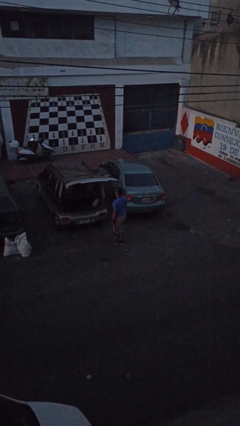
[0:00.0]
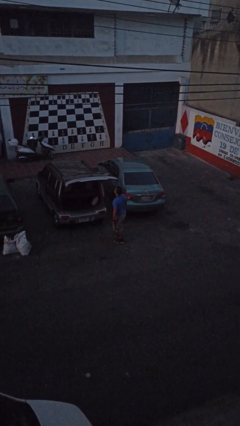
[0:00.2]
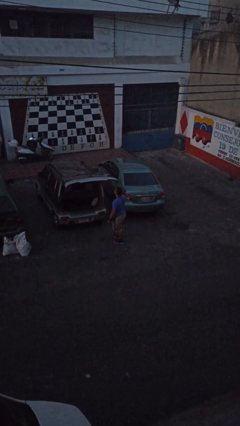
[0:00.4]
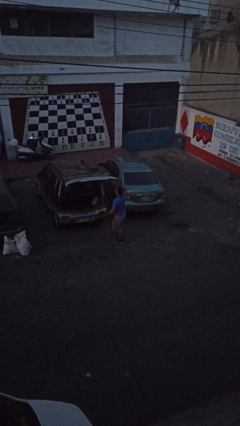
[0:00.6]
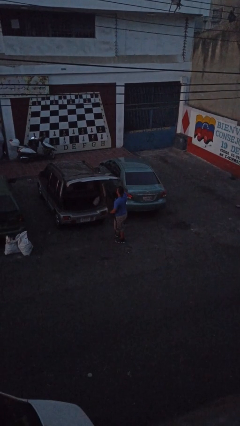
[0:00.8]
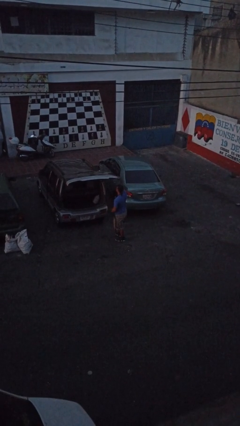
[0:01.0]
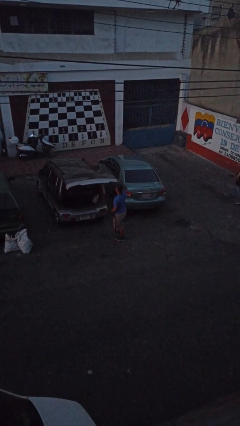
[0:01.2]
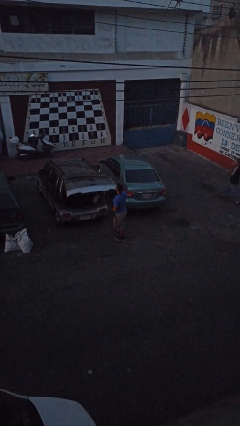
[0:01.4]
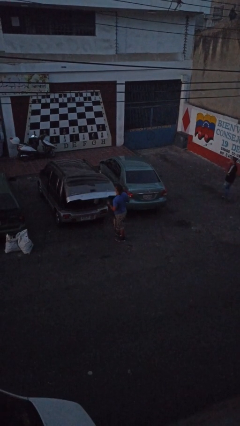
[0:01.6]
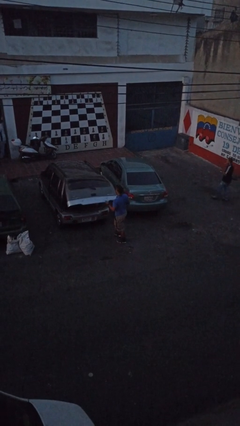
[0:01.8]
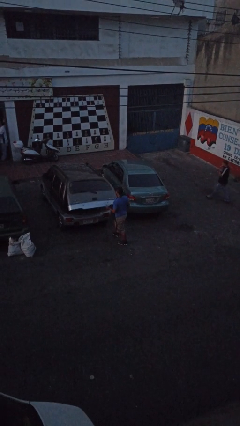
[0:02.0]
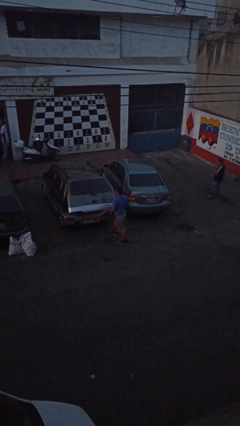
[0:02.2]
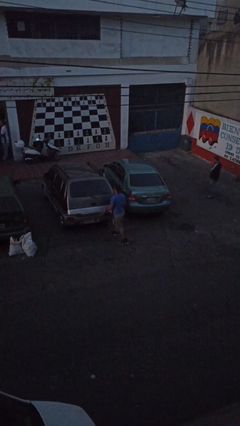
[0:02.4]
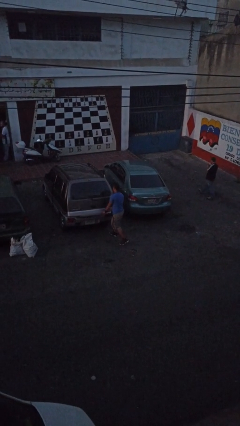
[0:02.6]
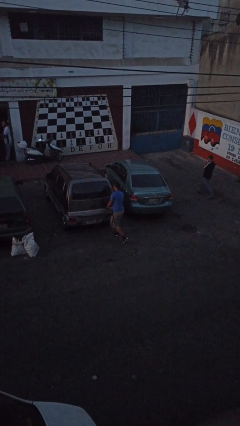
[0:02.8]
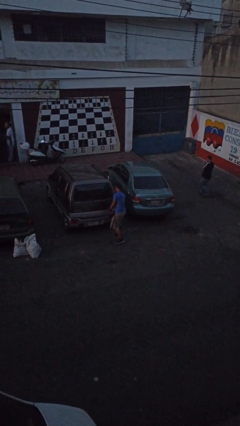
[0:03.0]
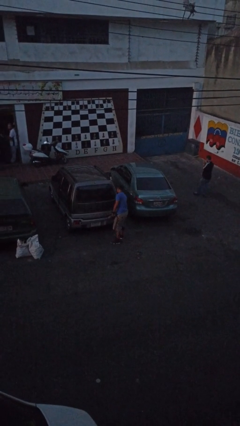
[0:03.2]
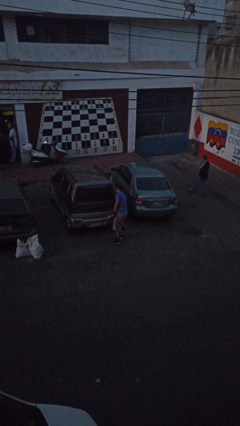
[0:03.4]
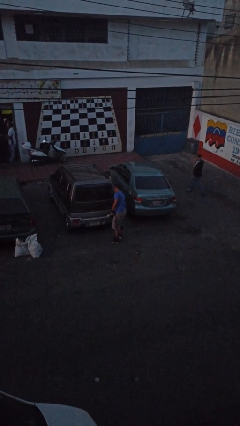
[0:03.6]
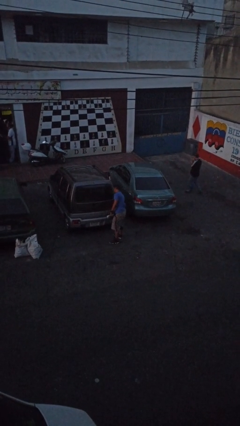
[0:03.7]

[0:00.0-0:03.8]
person closes car trunk

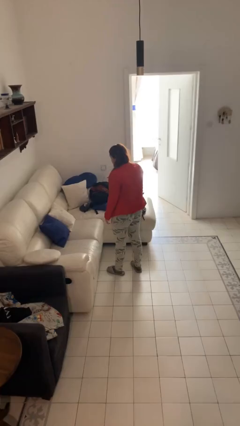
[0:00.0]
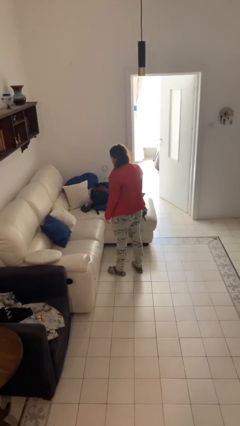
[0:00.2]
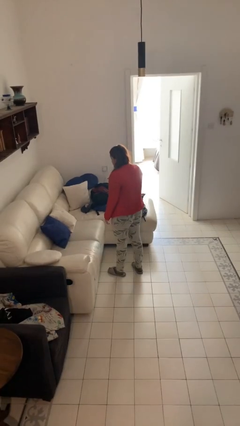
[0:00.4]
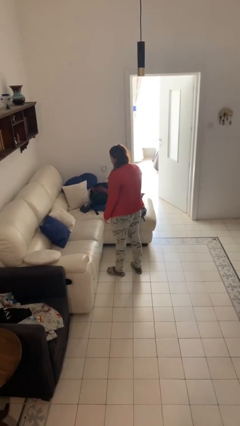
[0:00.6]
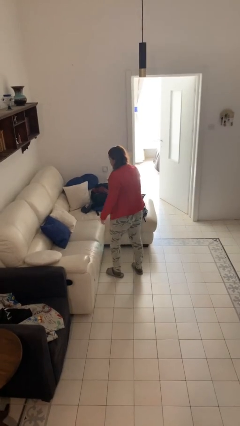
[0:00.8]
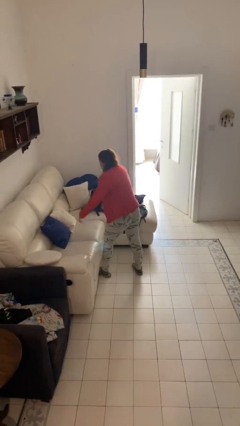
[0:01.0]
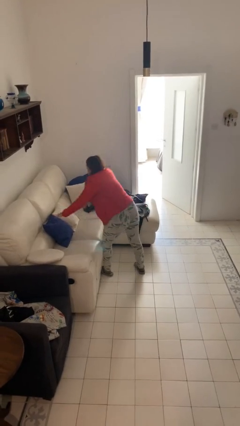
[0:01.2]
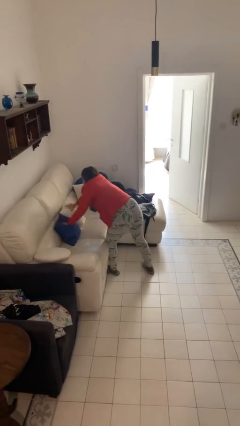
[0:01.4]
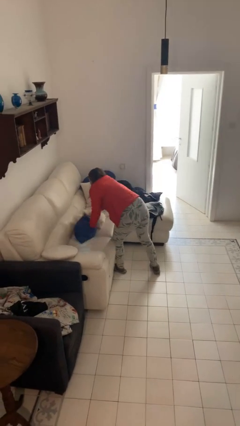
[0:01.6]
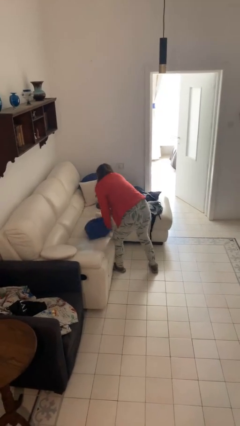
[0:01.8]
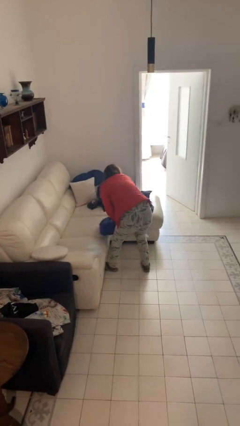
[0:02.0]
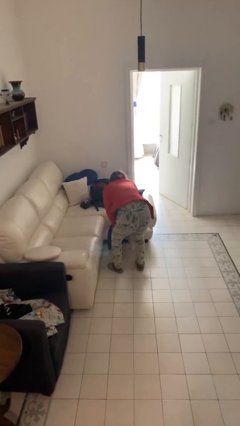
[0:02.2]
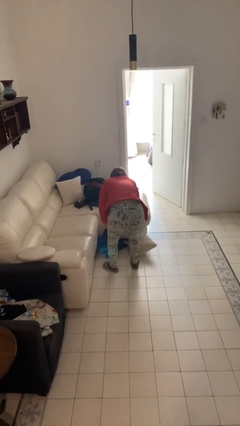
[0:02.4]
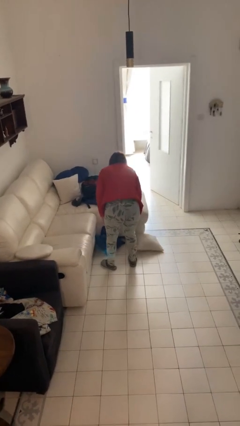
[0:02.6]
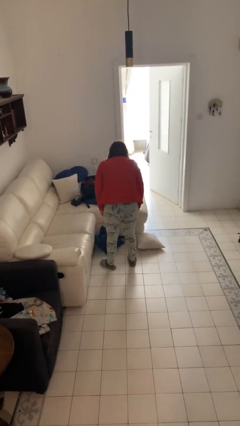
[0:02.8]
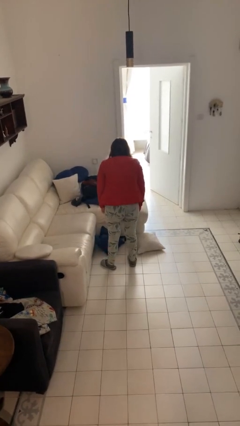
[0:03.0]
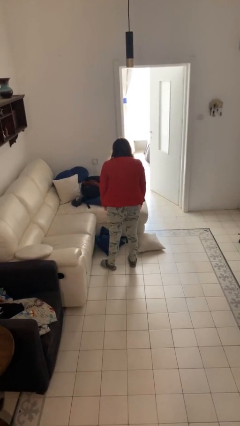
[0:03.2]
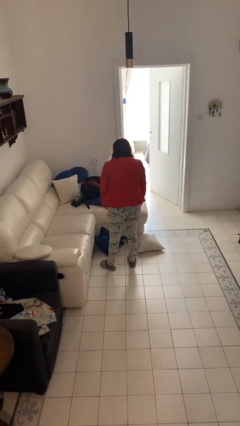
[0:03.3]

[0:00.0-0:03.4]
person knocks over furniture

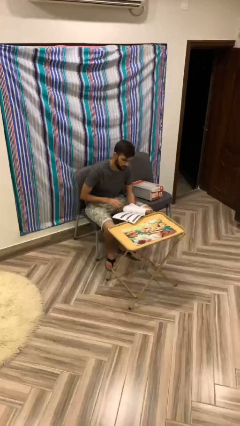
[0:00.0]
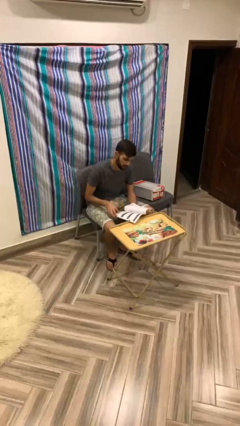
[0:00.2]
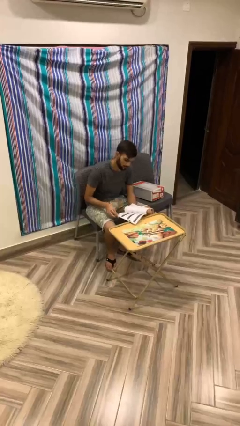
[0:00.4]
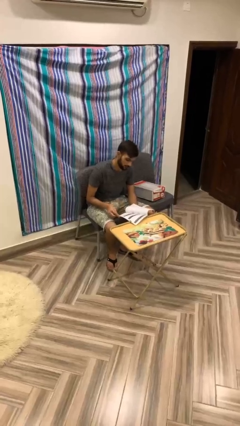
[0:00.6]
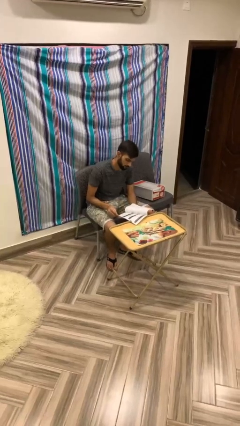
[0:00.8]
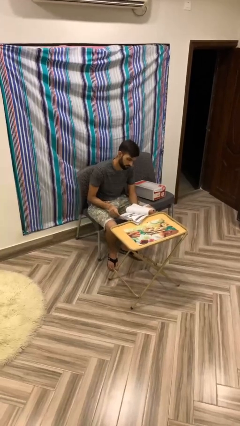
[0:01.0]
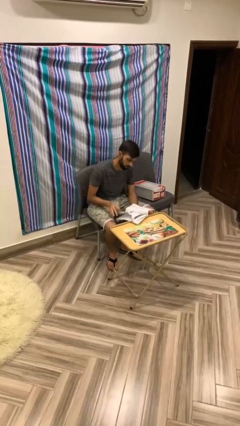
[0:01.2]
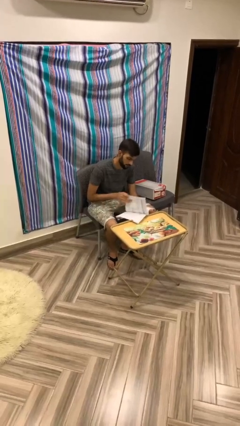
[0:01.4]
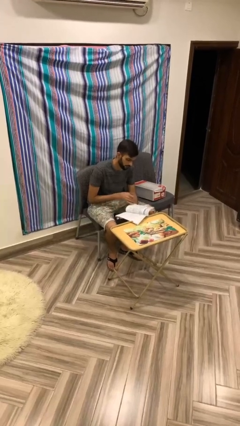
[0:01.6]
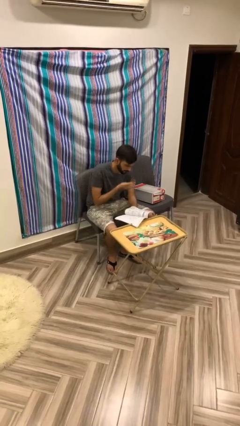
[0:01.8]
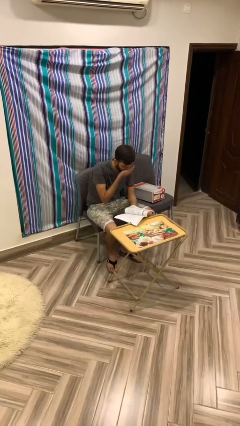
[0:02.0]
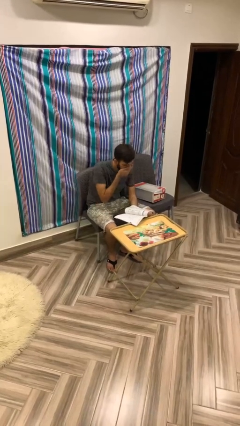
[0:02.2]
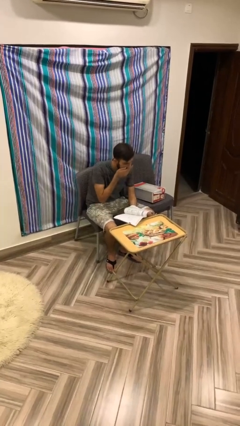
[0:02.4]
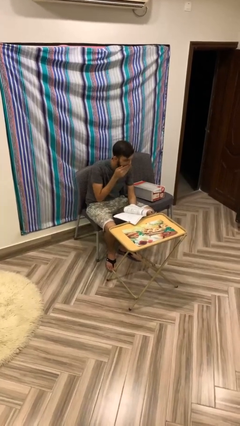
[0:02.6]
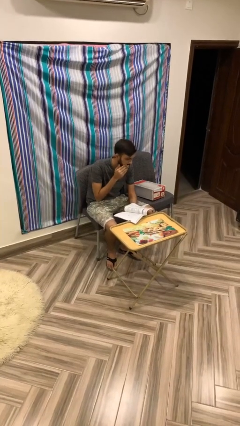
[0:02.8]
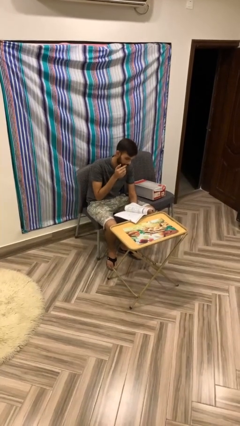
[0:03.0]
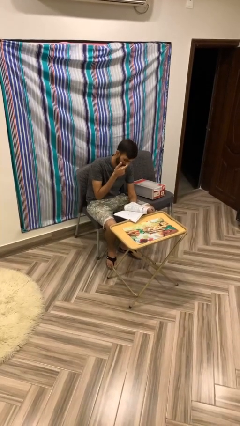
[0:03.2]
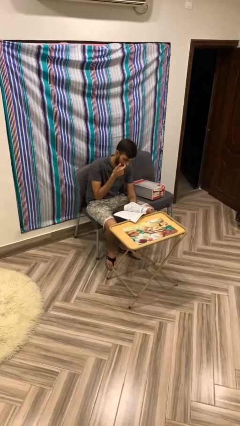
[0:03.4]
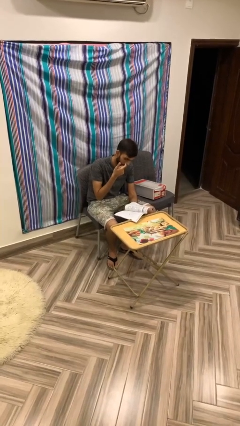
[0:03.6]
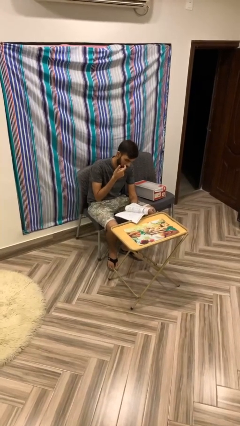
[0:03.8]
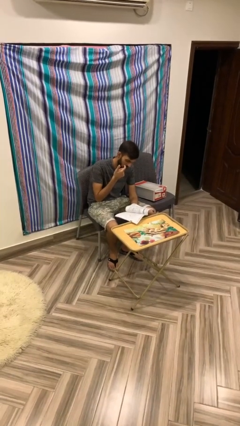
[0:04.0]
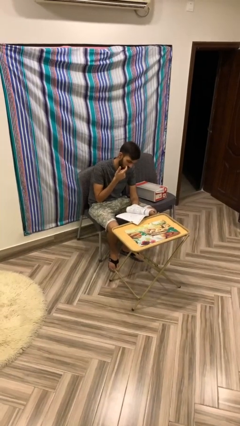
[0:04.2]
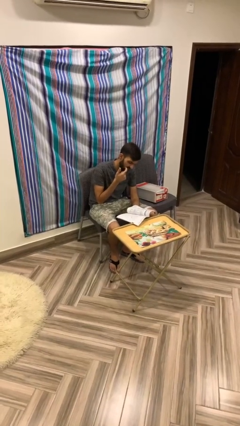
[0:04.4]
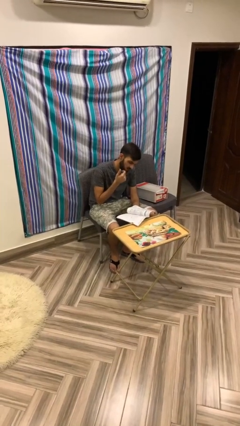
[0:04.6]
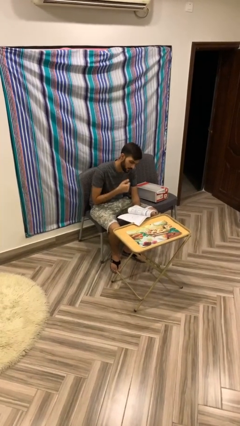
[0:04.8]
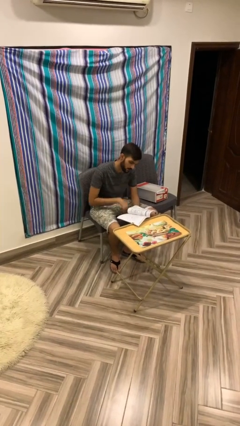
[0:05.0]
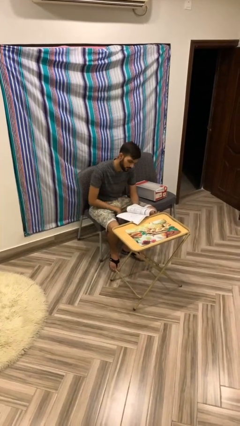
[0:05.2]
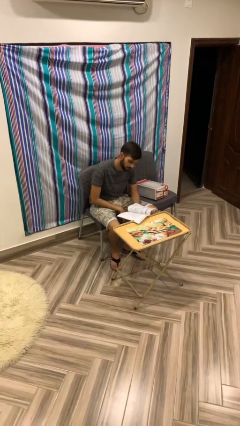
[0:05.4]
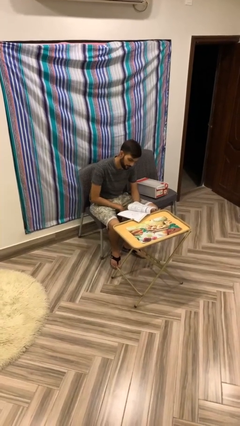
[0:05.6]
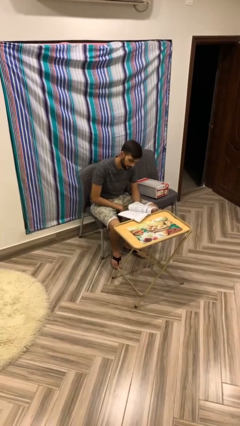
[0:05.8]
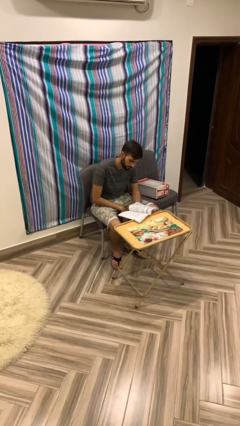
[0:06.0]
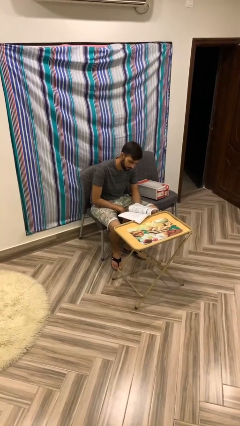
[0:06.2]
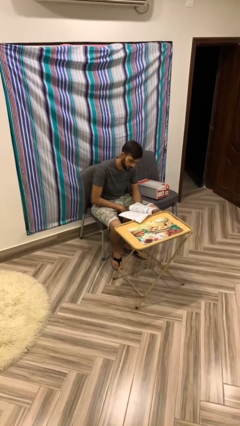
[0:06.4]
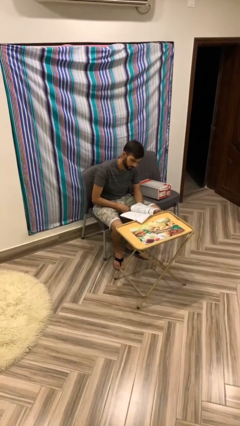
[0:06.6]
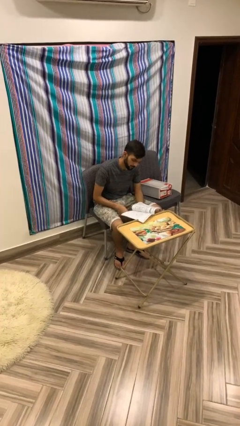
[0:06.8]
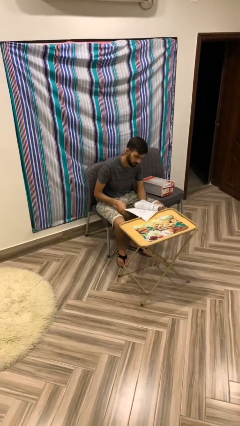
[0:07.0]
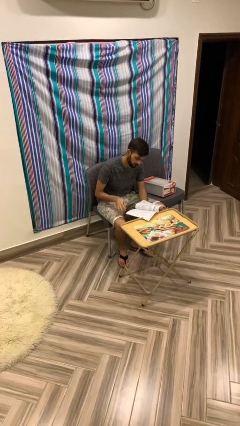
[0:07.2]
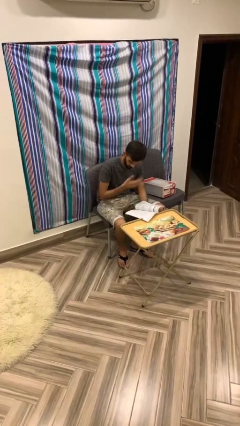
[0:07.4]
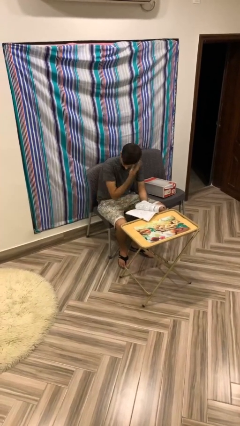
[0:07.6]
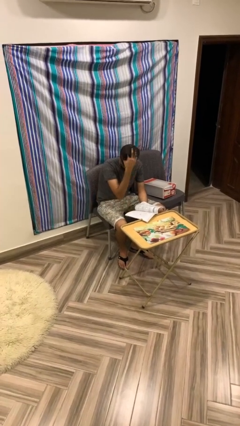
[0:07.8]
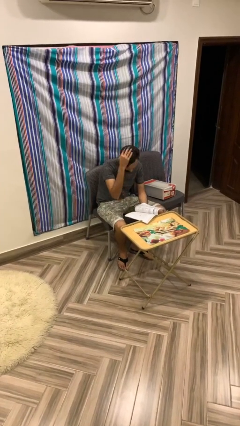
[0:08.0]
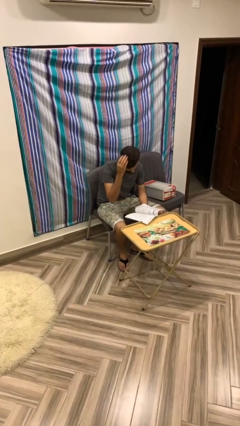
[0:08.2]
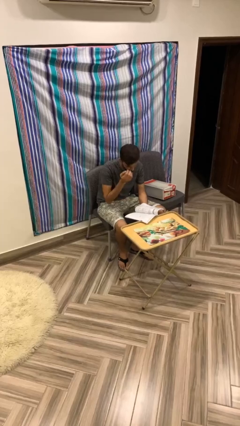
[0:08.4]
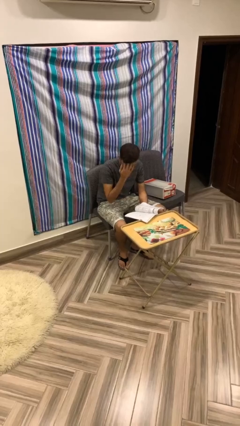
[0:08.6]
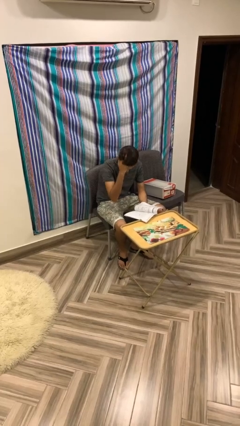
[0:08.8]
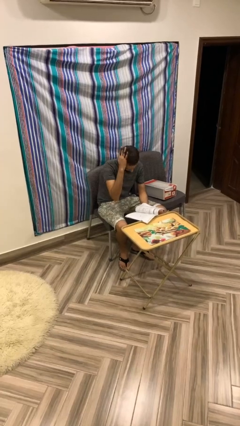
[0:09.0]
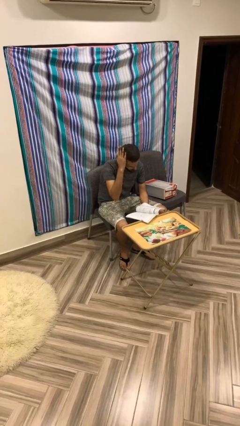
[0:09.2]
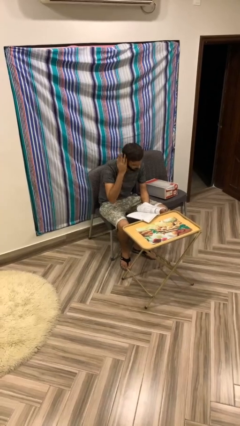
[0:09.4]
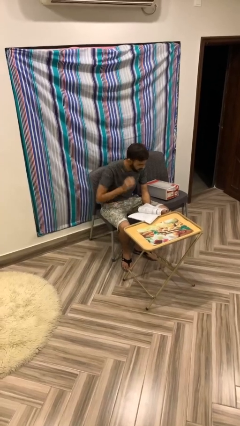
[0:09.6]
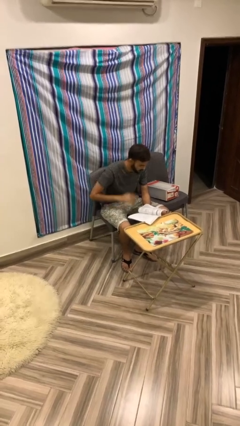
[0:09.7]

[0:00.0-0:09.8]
person reads document

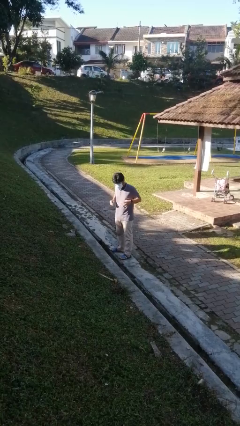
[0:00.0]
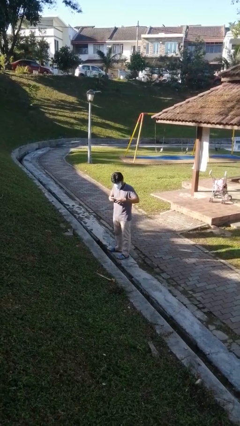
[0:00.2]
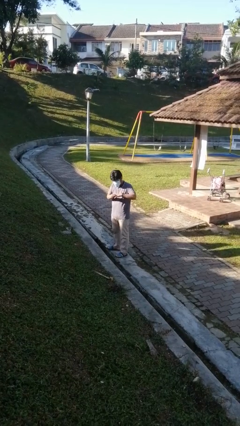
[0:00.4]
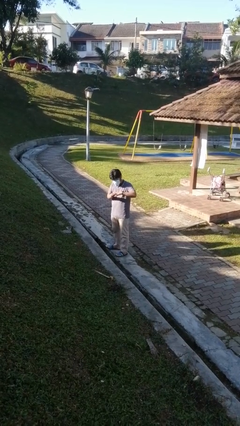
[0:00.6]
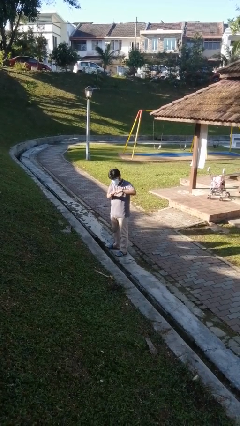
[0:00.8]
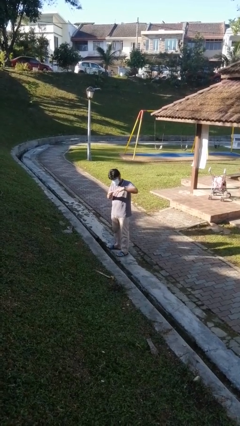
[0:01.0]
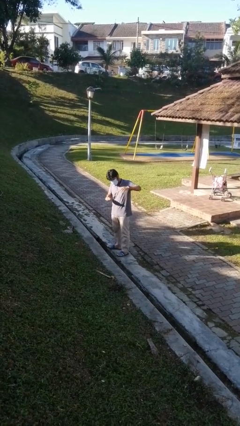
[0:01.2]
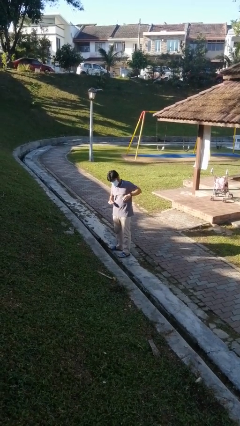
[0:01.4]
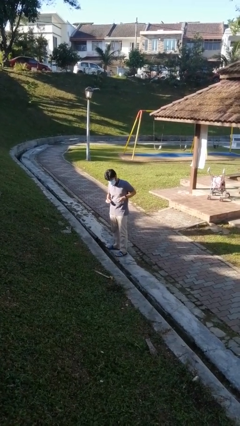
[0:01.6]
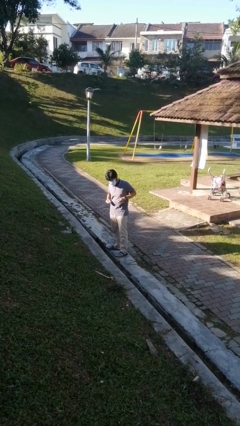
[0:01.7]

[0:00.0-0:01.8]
person takes off ring
